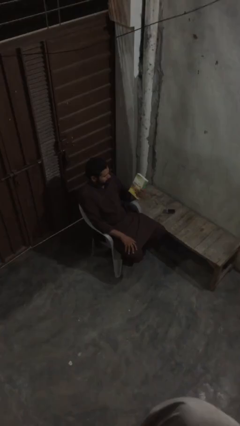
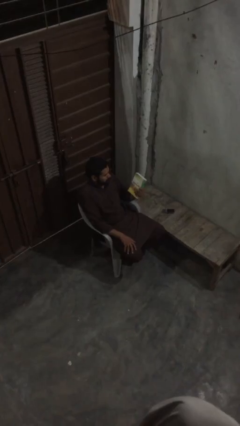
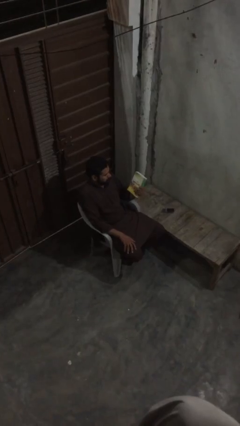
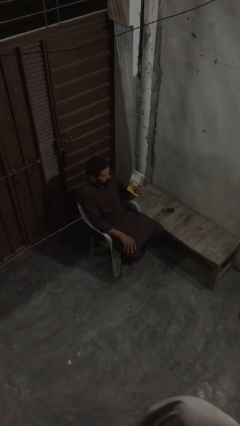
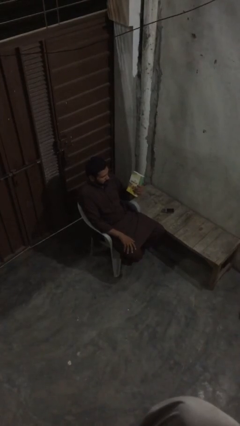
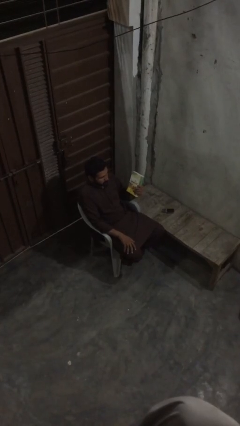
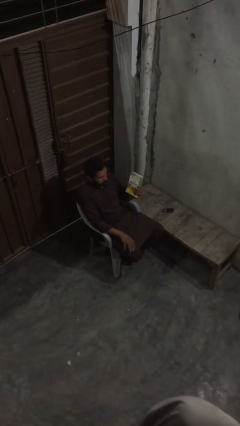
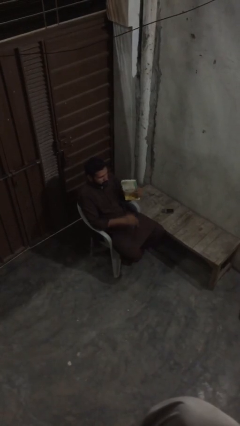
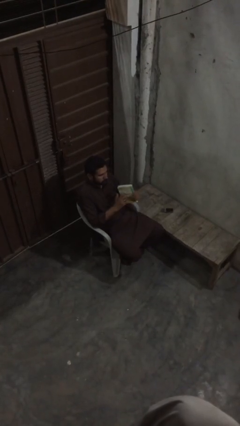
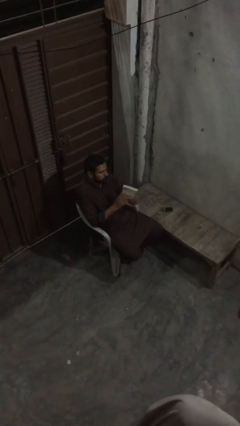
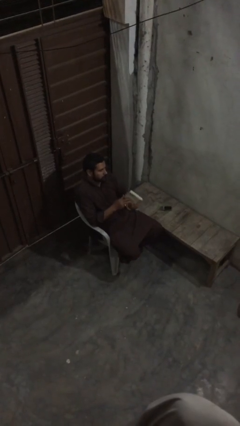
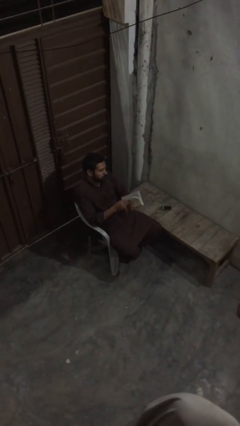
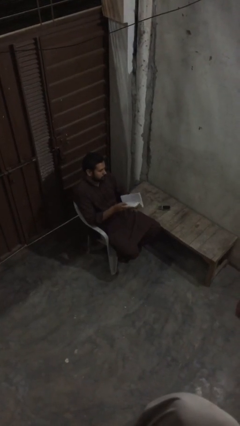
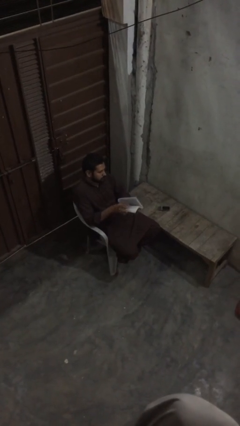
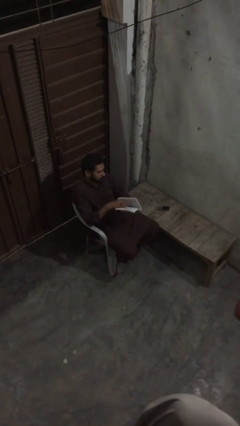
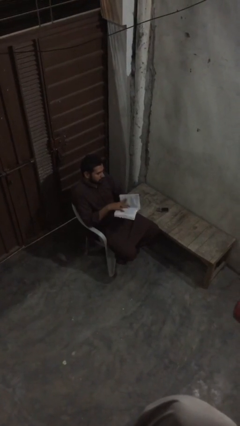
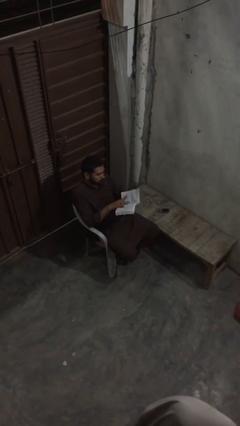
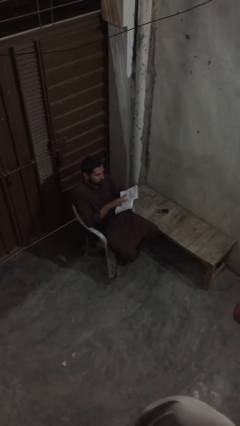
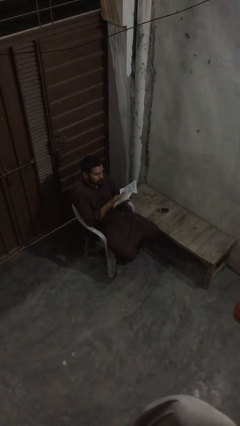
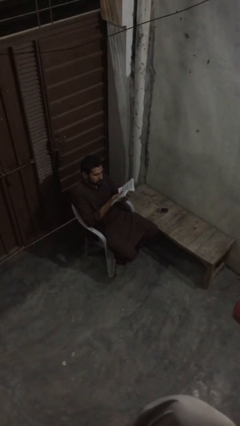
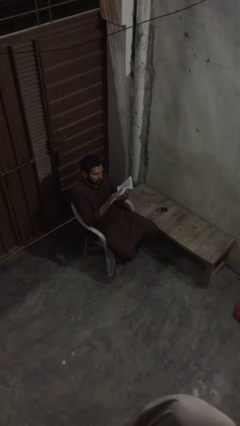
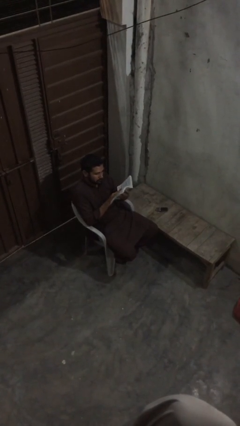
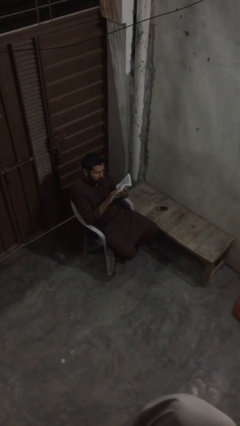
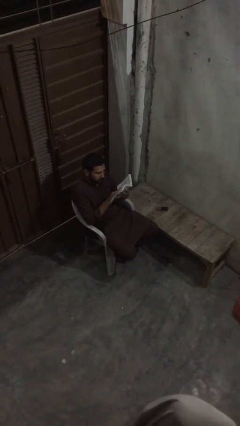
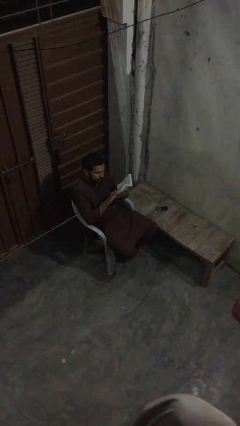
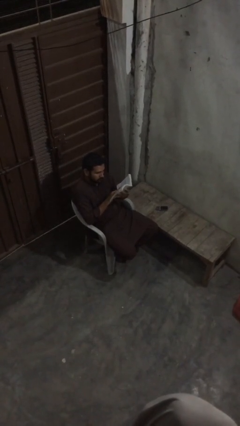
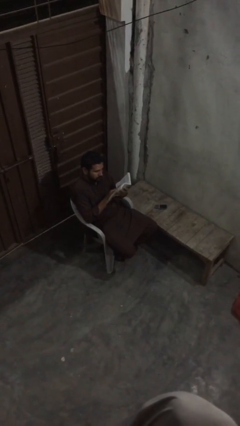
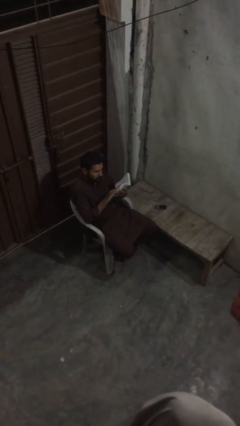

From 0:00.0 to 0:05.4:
person reads document

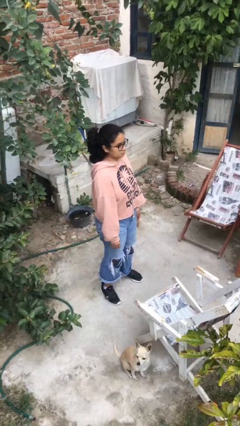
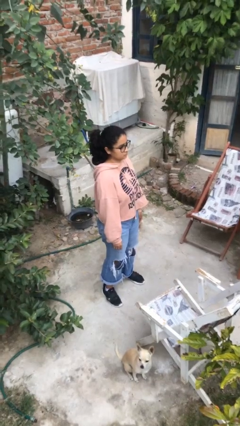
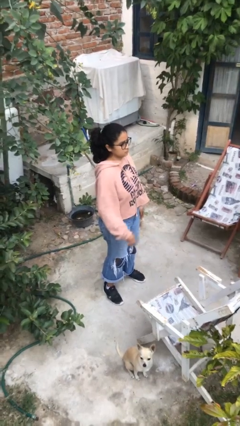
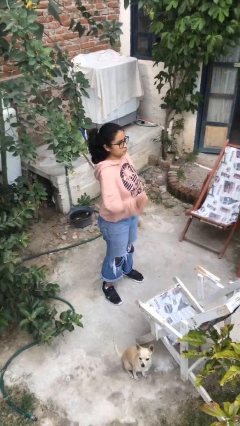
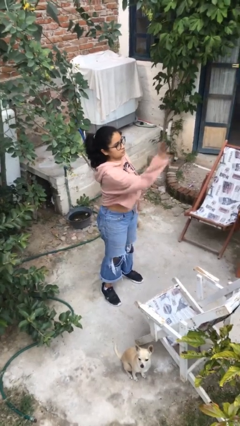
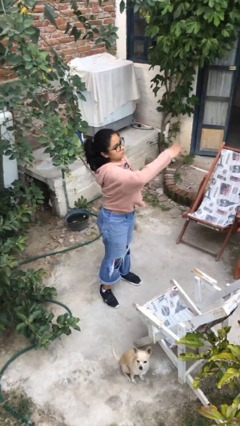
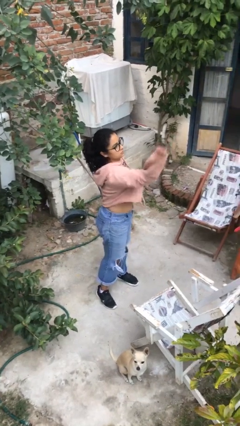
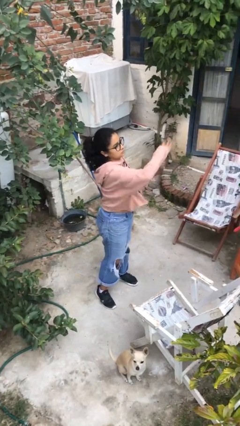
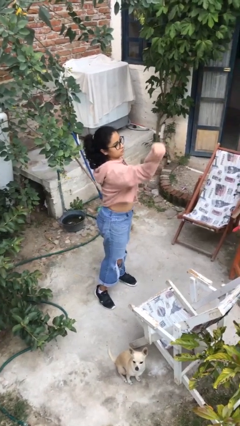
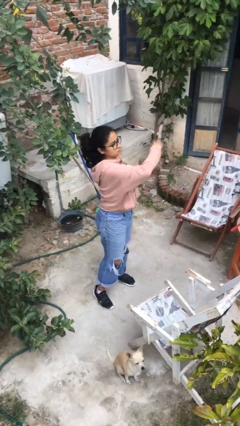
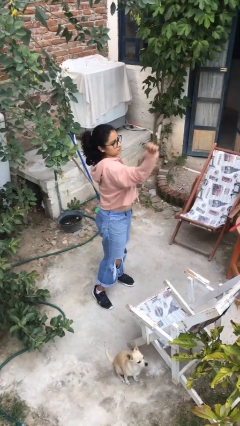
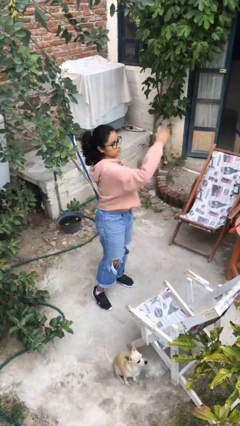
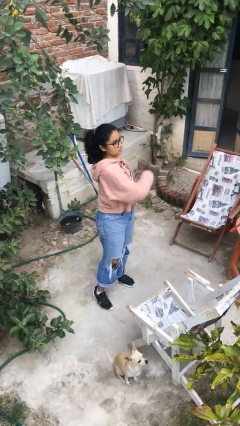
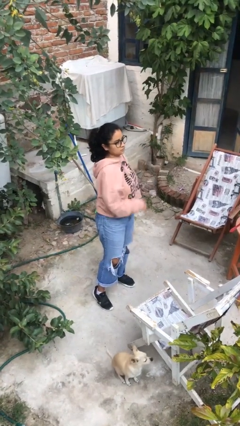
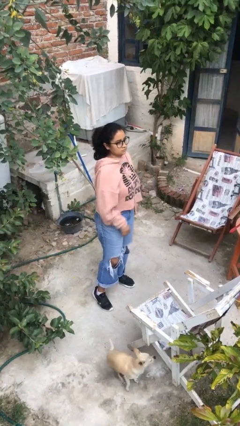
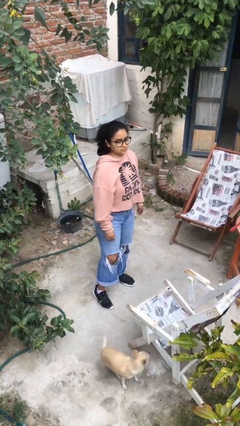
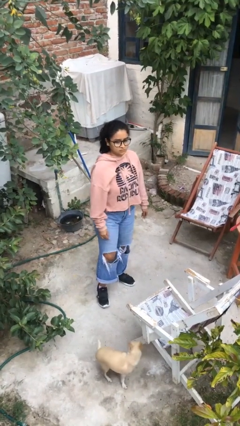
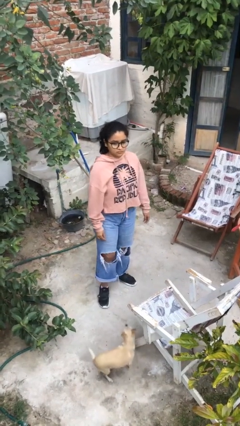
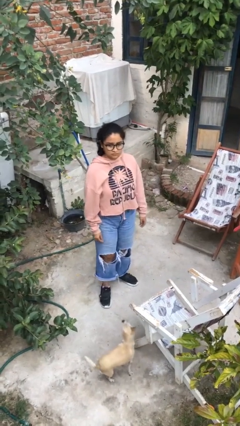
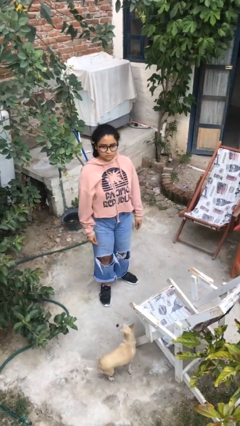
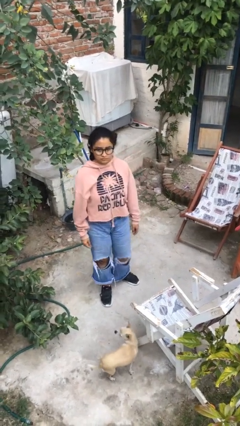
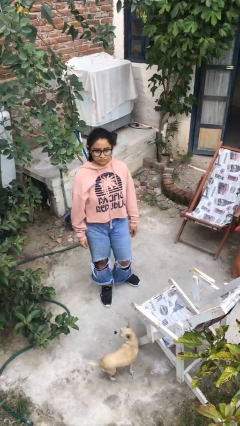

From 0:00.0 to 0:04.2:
person punches

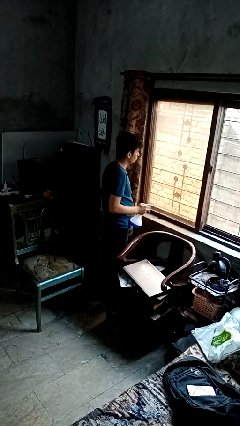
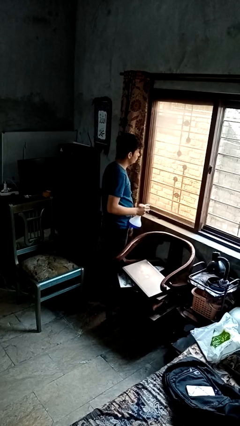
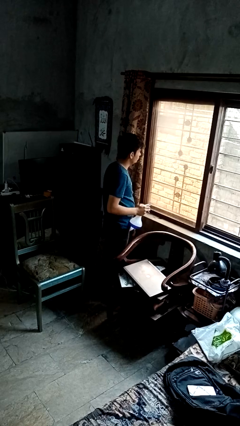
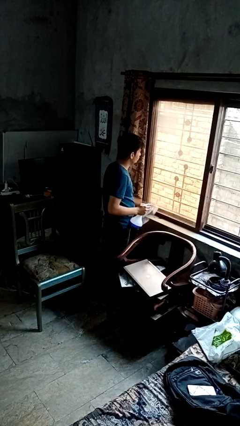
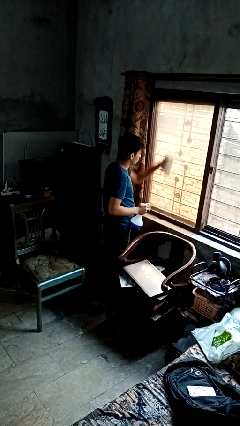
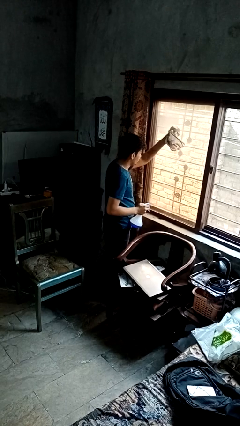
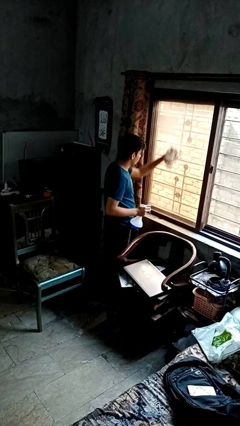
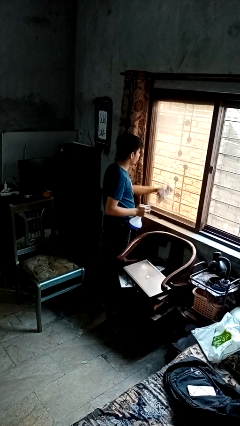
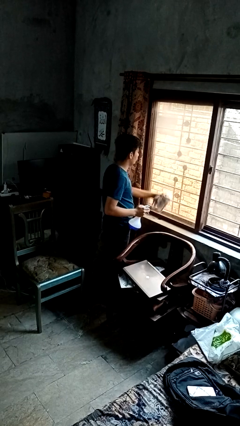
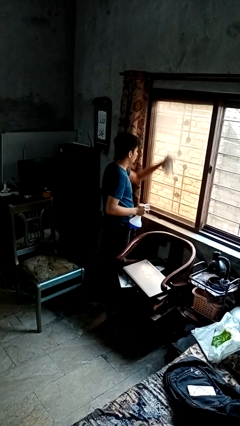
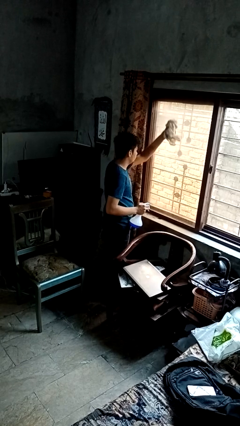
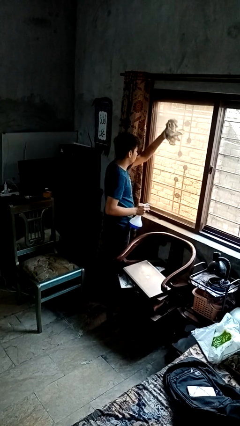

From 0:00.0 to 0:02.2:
person washes window

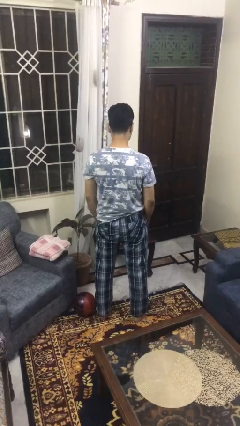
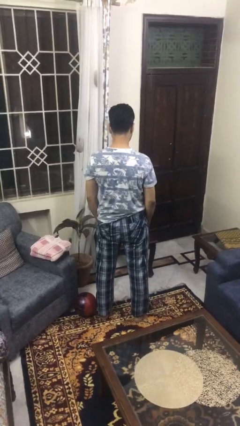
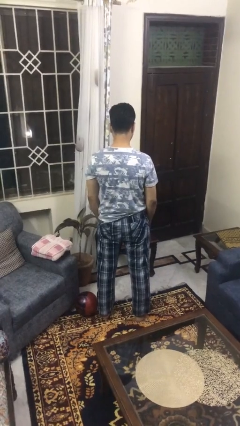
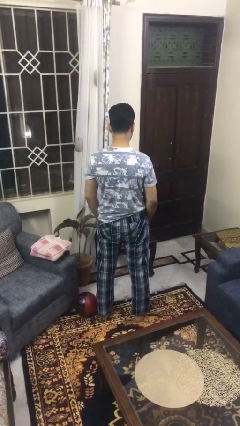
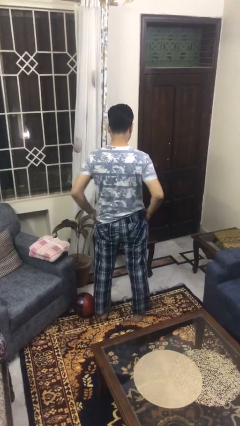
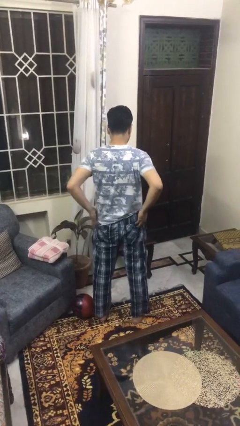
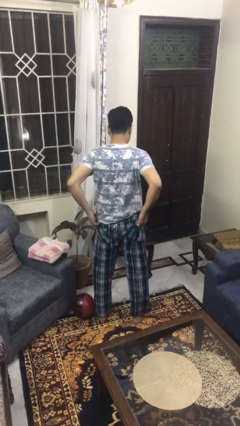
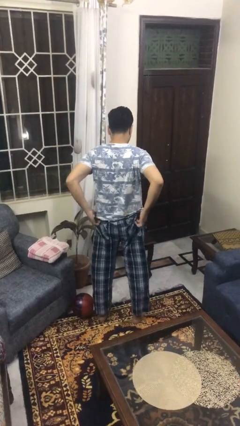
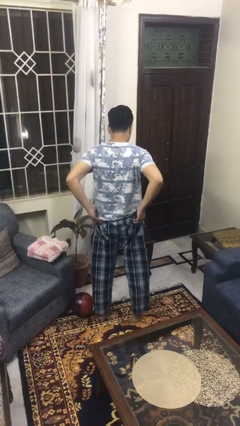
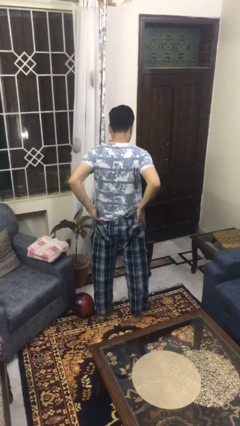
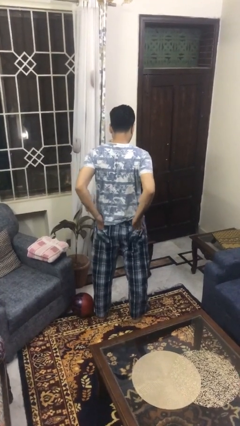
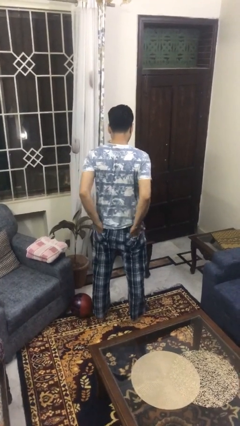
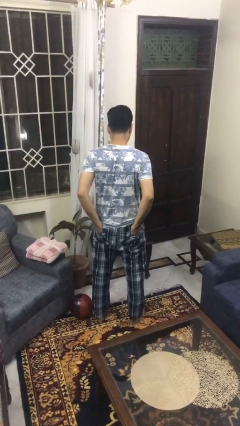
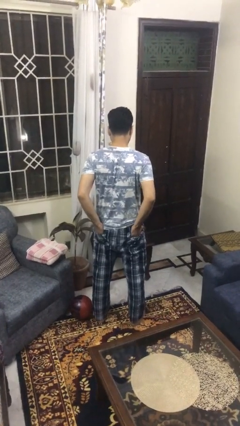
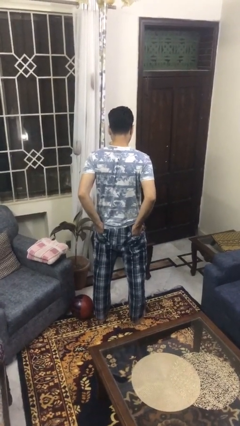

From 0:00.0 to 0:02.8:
person puts hands in back pockets

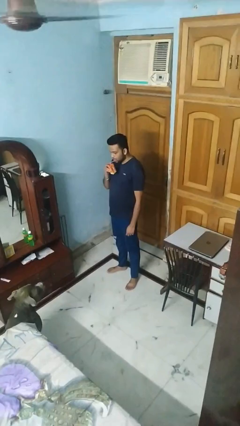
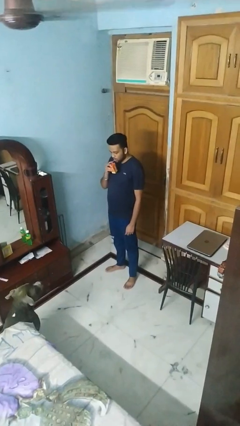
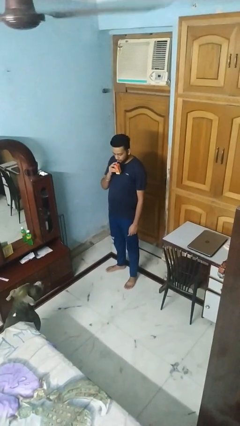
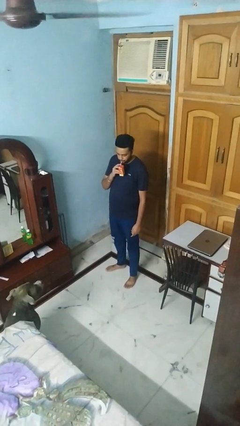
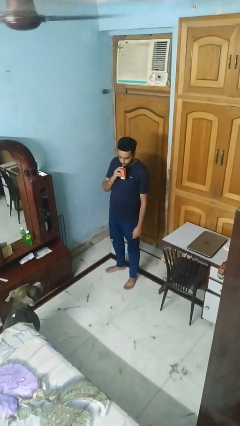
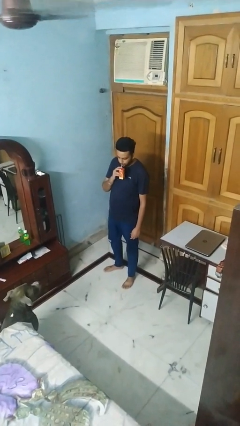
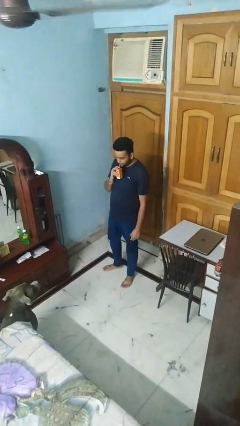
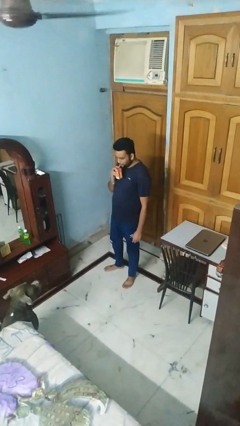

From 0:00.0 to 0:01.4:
person drinks from straw

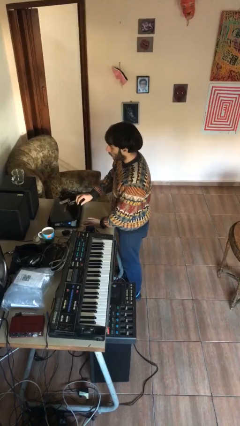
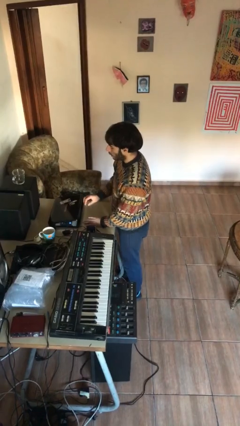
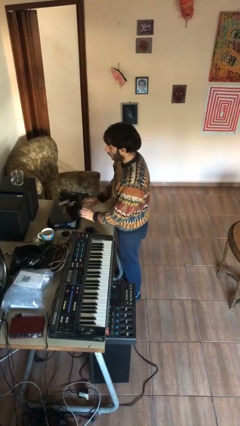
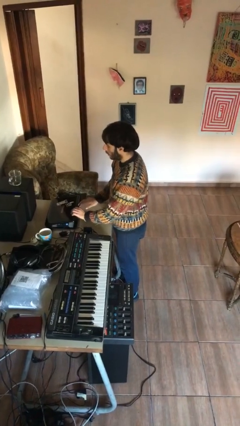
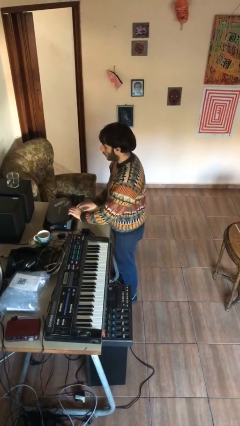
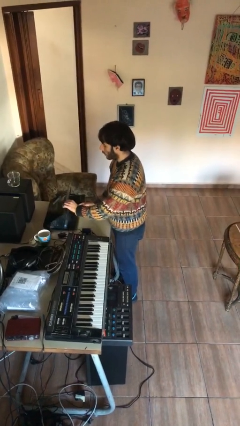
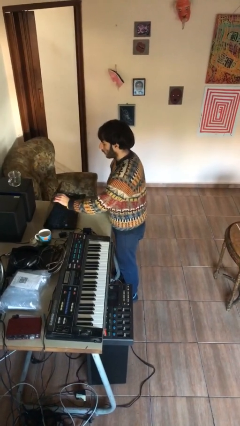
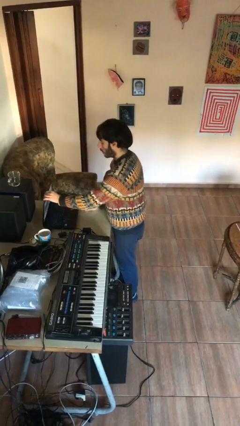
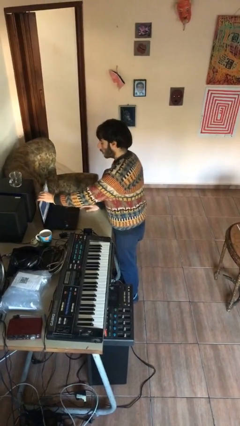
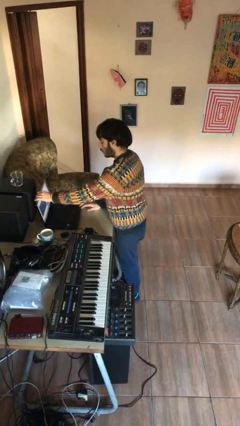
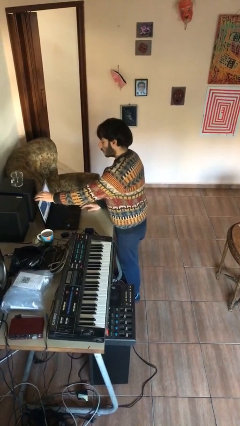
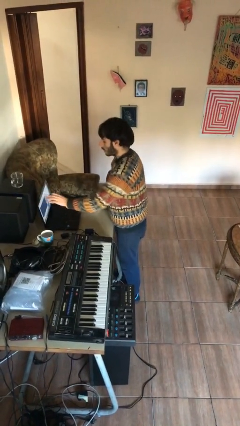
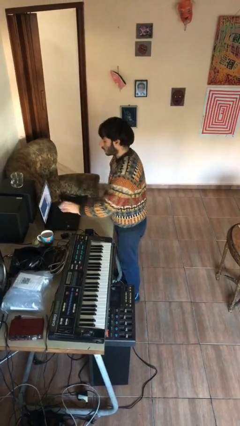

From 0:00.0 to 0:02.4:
person opens laptop
